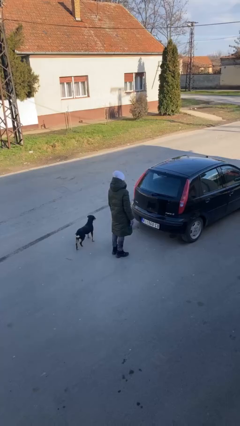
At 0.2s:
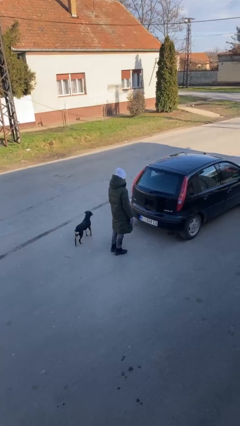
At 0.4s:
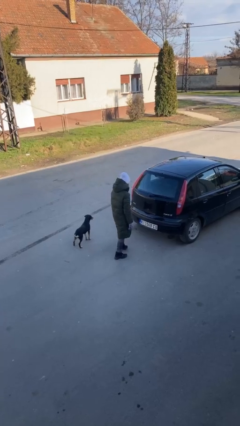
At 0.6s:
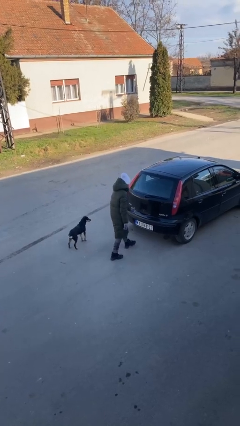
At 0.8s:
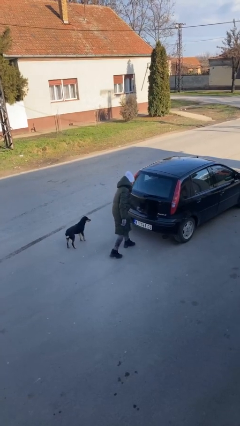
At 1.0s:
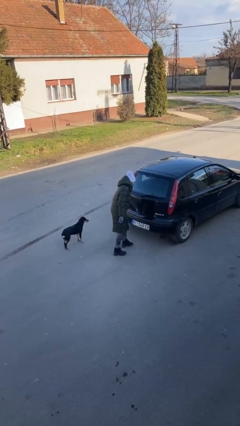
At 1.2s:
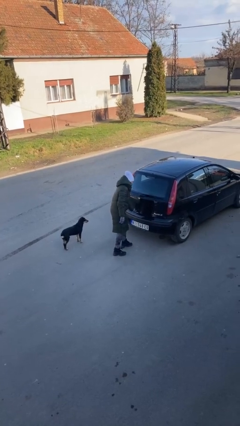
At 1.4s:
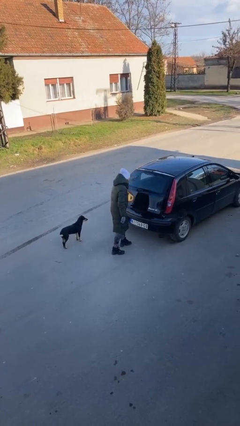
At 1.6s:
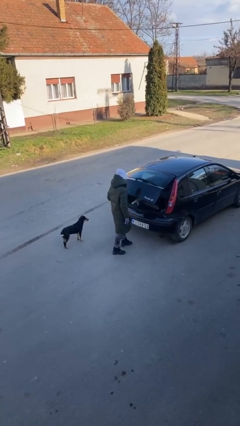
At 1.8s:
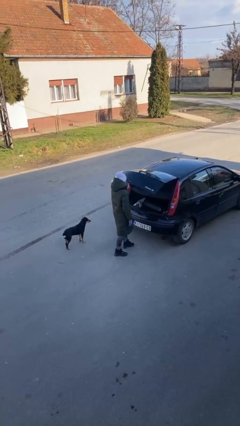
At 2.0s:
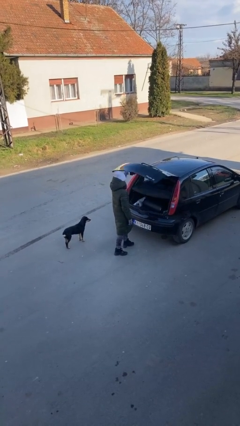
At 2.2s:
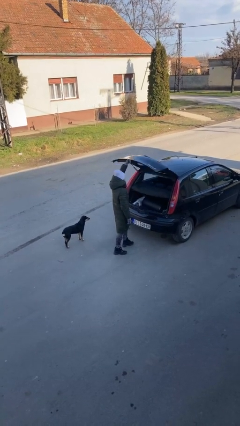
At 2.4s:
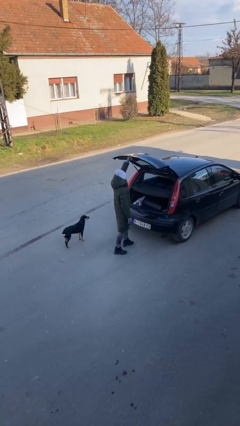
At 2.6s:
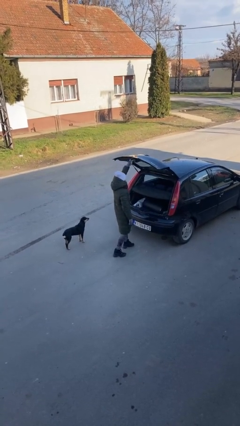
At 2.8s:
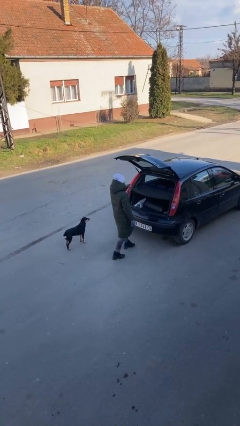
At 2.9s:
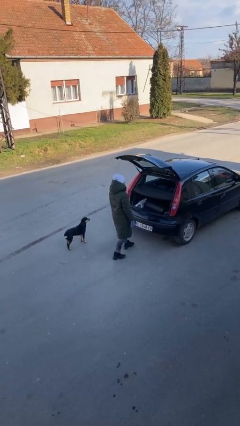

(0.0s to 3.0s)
person opens car trunk

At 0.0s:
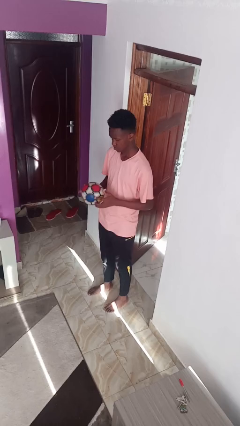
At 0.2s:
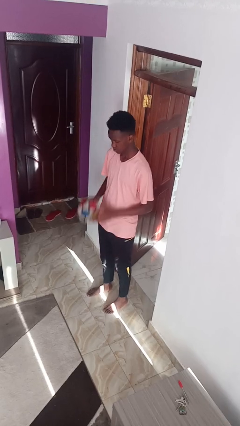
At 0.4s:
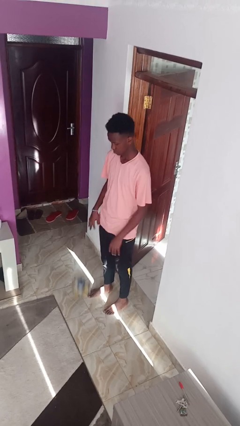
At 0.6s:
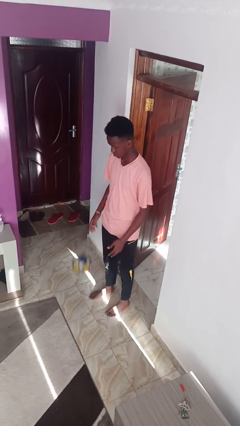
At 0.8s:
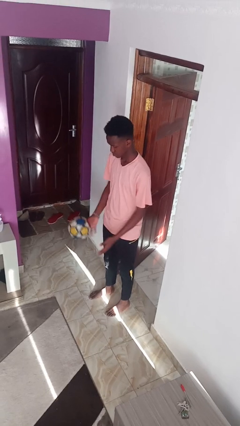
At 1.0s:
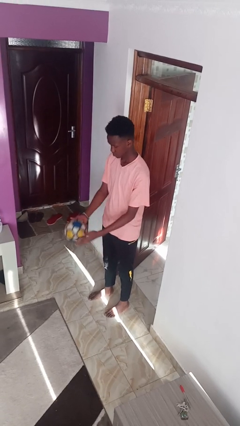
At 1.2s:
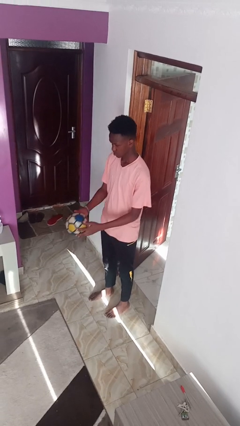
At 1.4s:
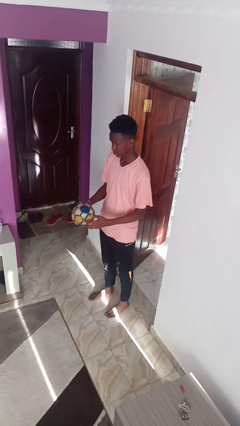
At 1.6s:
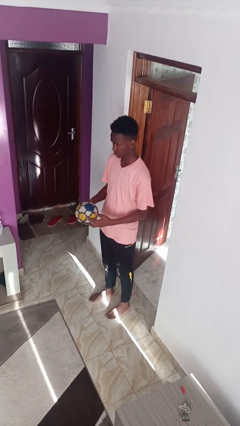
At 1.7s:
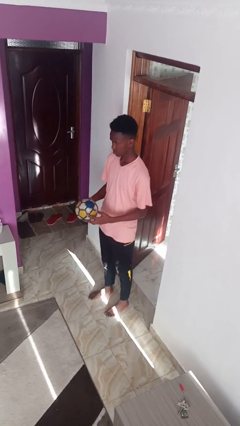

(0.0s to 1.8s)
person bounces ball on floor

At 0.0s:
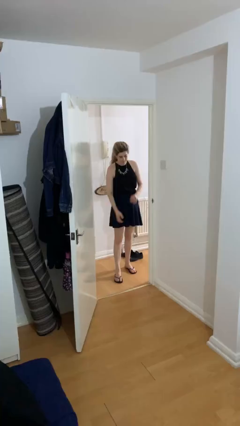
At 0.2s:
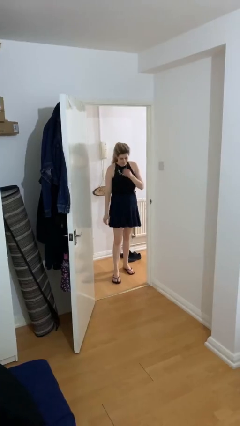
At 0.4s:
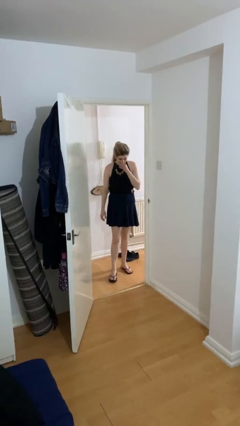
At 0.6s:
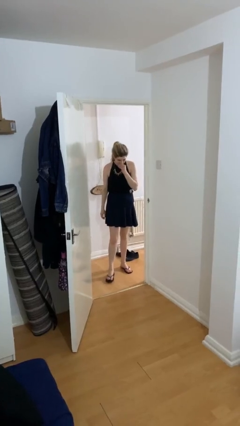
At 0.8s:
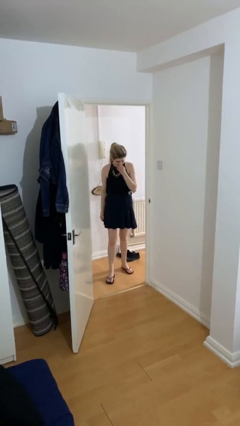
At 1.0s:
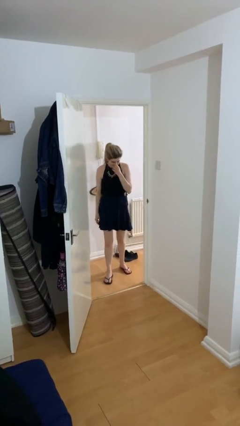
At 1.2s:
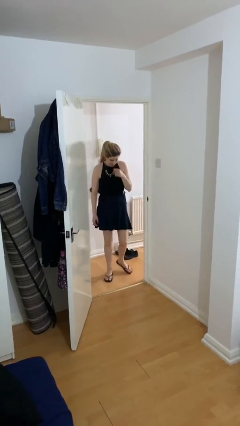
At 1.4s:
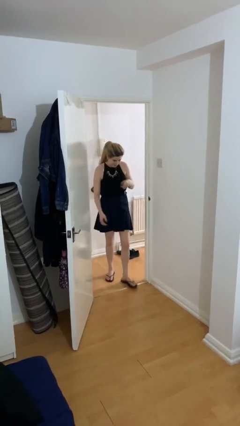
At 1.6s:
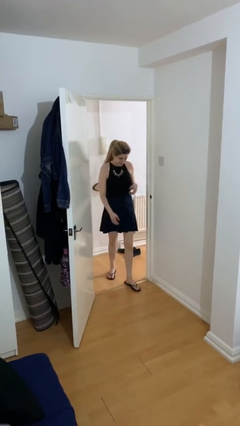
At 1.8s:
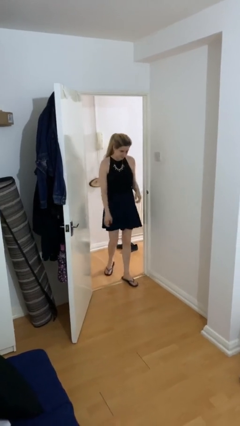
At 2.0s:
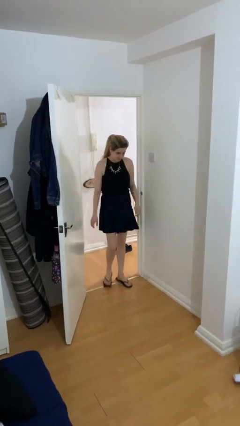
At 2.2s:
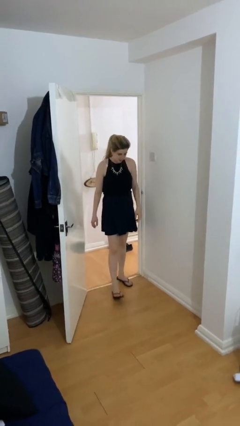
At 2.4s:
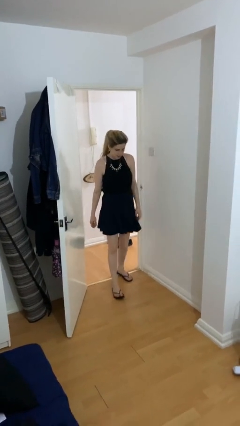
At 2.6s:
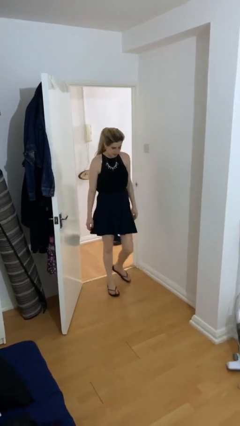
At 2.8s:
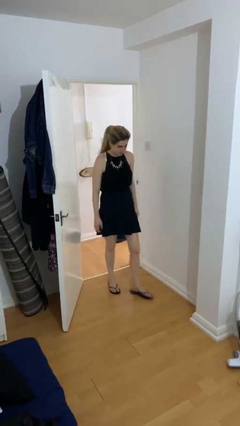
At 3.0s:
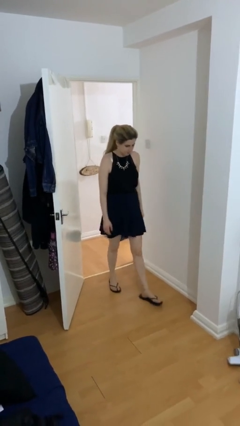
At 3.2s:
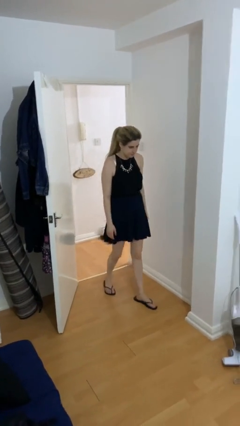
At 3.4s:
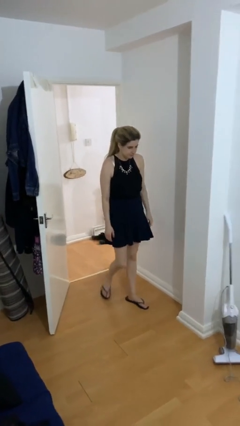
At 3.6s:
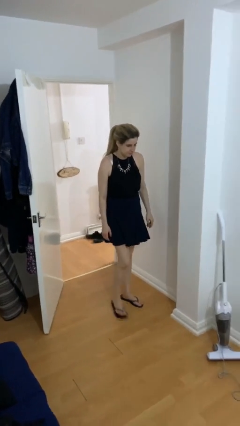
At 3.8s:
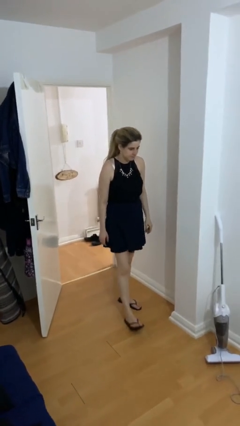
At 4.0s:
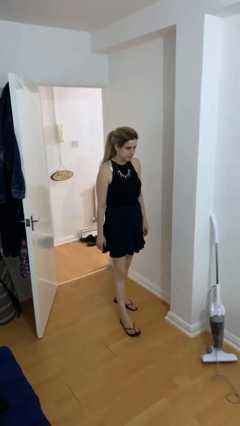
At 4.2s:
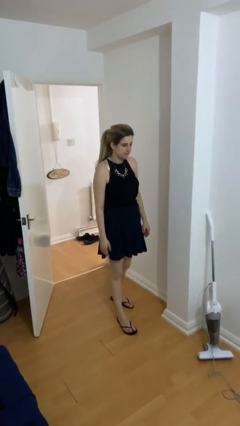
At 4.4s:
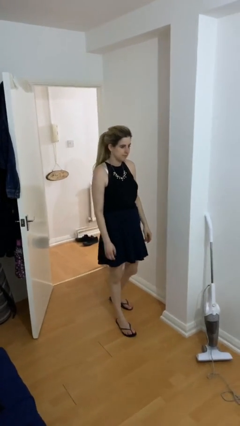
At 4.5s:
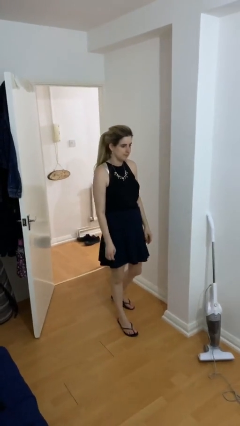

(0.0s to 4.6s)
person enters scene through structure

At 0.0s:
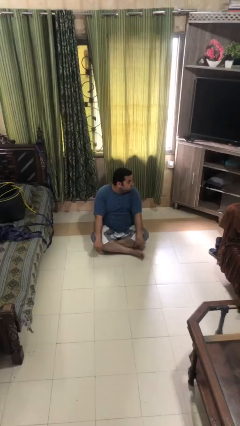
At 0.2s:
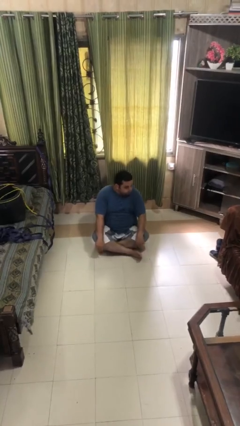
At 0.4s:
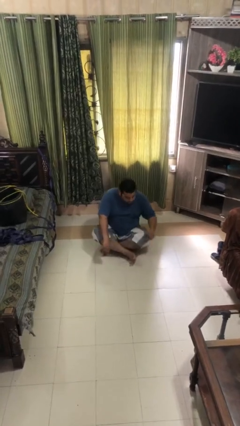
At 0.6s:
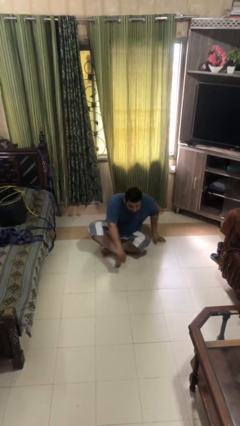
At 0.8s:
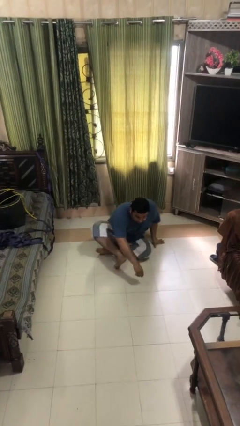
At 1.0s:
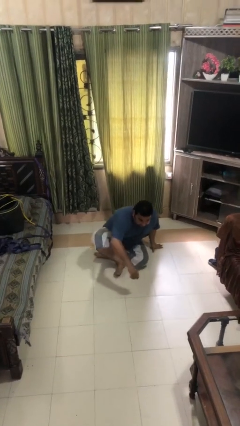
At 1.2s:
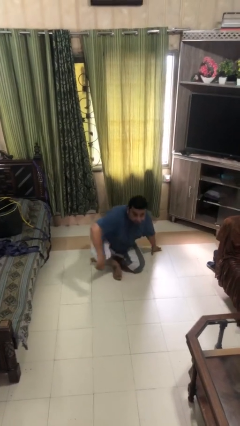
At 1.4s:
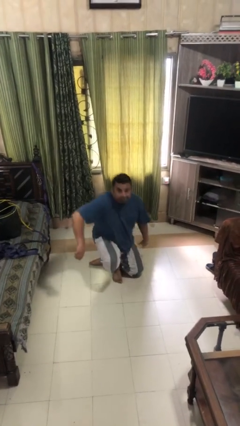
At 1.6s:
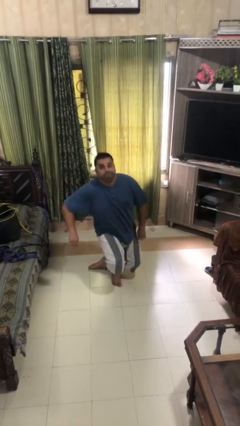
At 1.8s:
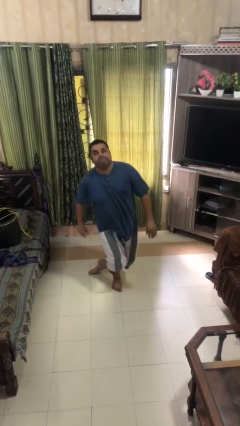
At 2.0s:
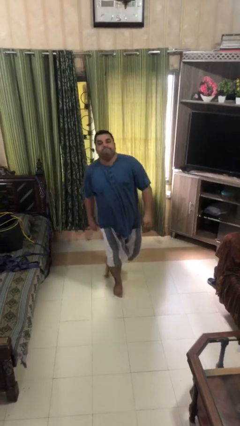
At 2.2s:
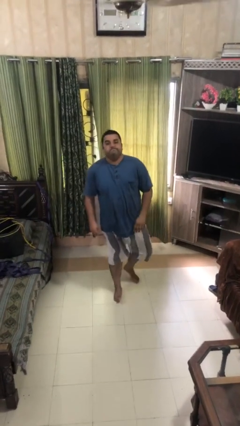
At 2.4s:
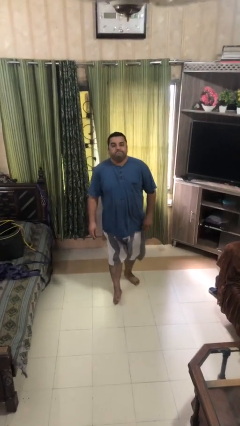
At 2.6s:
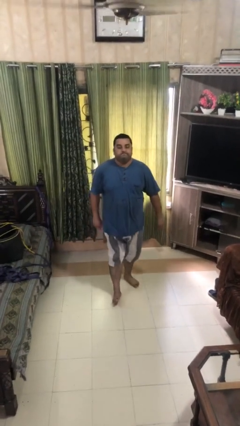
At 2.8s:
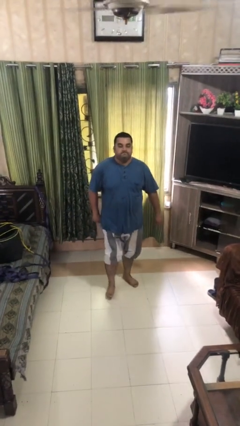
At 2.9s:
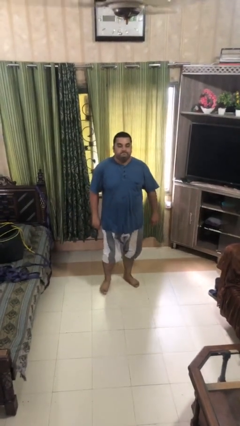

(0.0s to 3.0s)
person stands up from floor

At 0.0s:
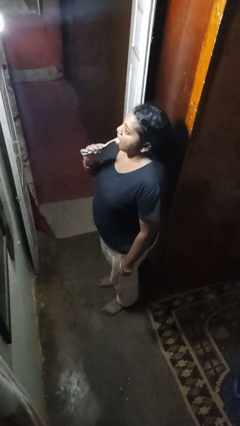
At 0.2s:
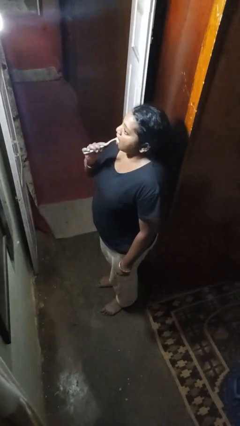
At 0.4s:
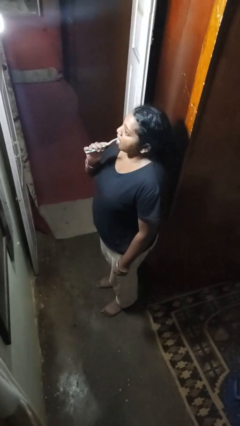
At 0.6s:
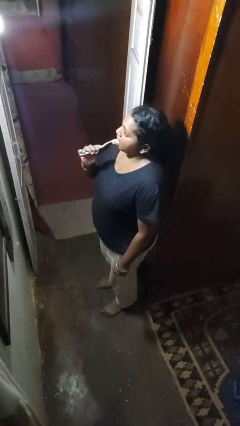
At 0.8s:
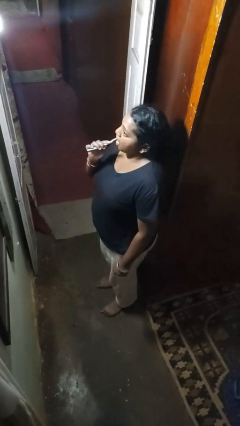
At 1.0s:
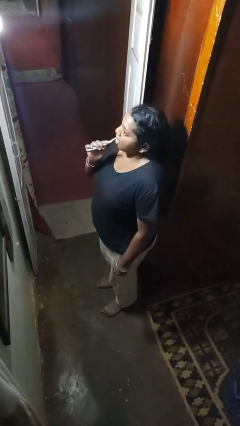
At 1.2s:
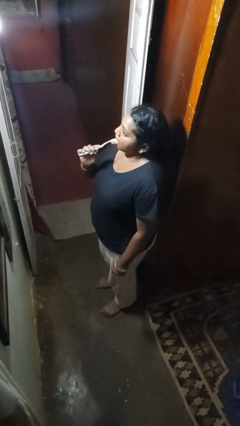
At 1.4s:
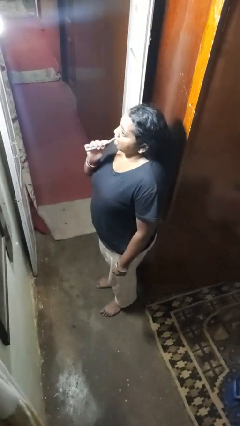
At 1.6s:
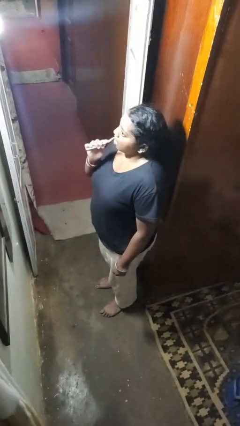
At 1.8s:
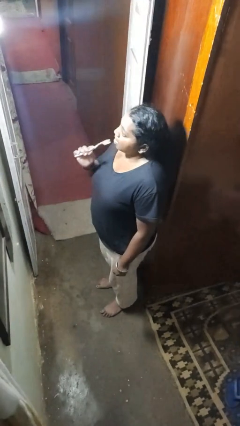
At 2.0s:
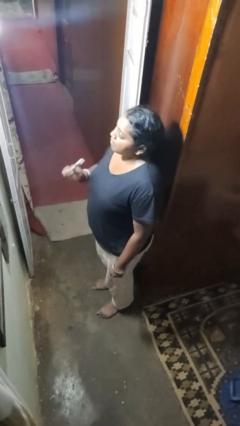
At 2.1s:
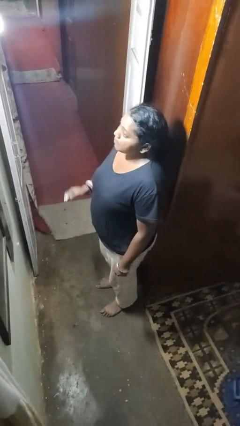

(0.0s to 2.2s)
person brushes teeth

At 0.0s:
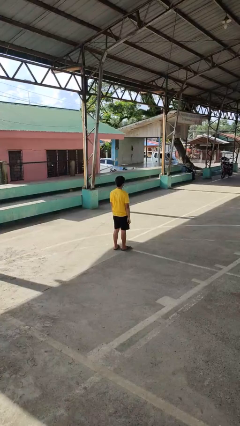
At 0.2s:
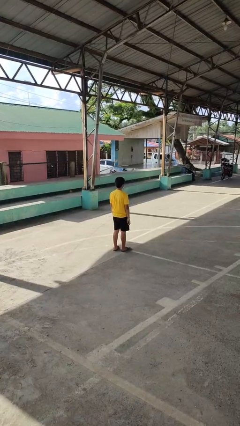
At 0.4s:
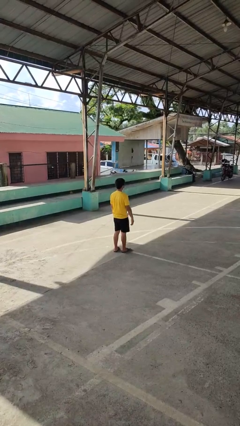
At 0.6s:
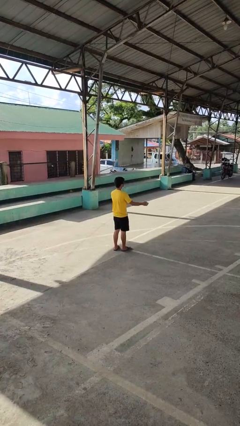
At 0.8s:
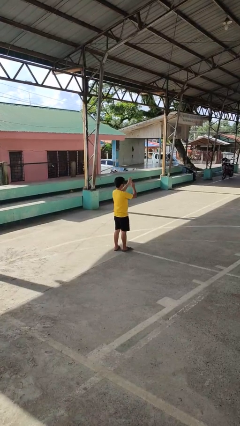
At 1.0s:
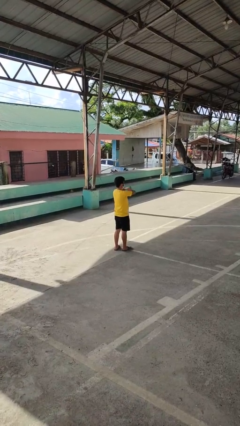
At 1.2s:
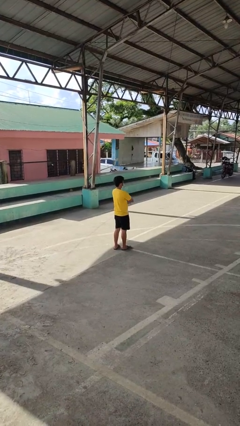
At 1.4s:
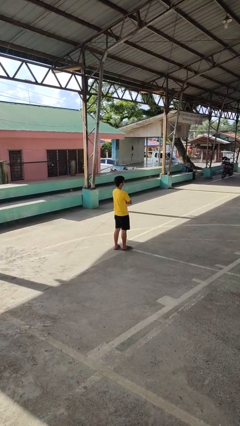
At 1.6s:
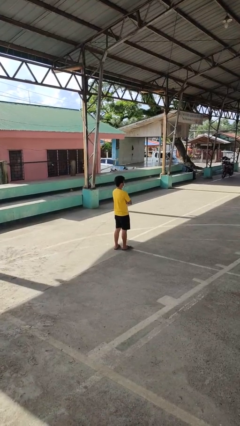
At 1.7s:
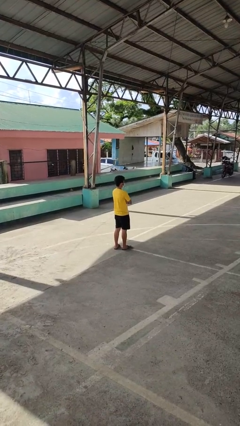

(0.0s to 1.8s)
person crosses arms

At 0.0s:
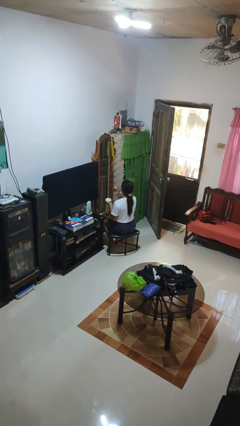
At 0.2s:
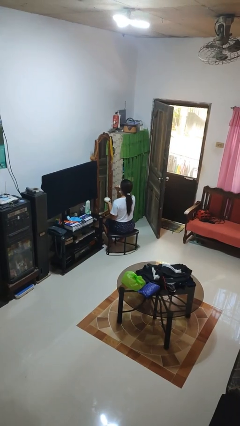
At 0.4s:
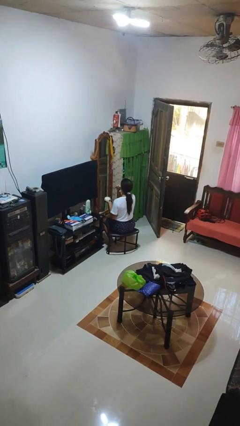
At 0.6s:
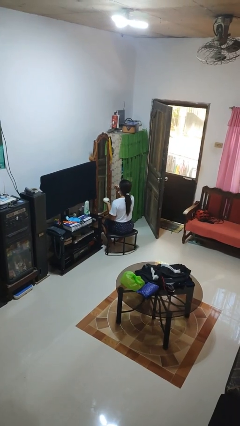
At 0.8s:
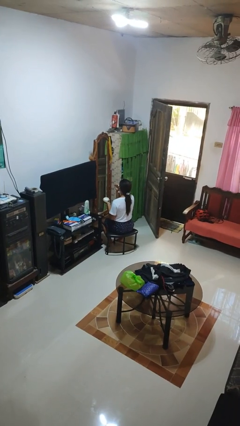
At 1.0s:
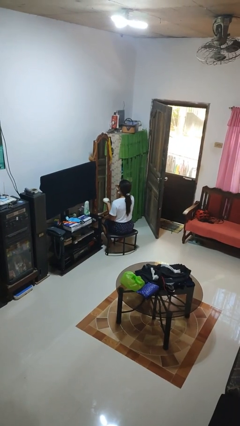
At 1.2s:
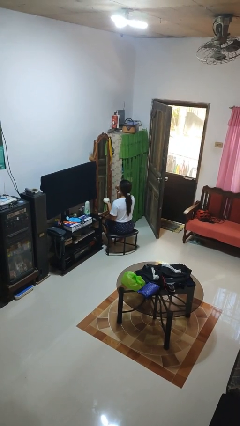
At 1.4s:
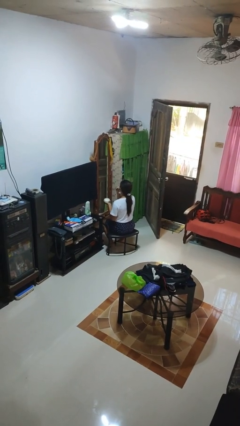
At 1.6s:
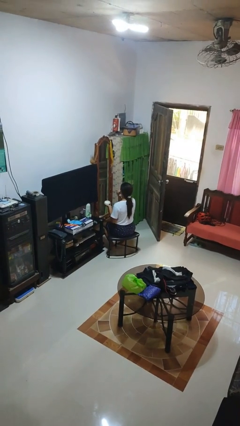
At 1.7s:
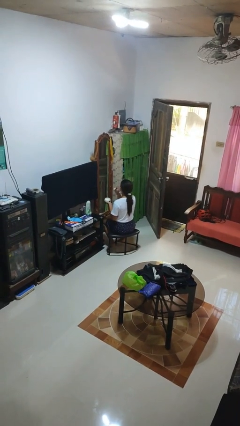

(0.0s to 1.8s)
person applies foundation makeup
